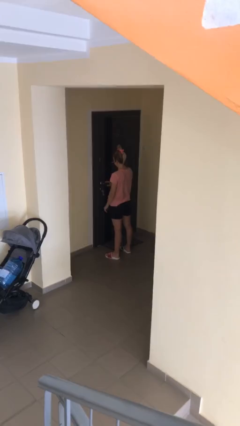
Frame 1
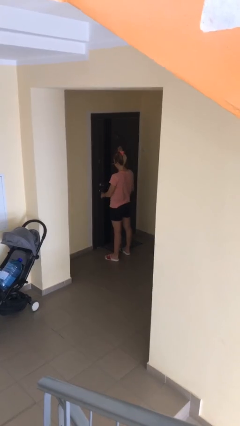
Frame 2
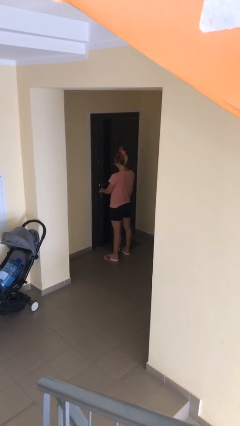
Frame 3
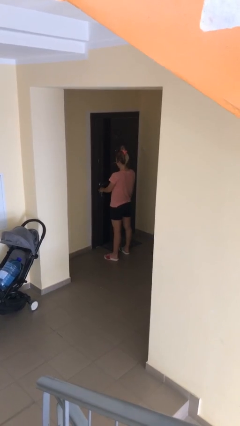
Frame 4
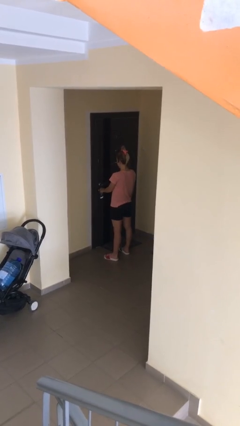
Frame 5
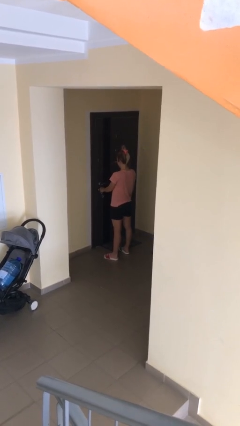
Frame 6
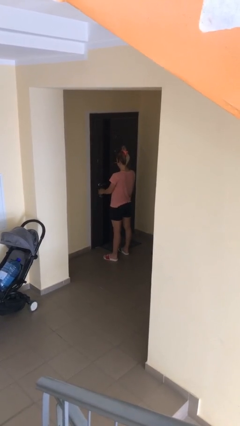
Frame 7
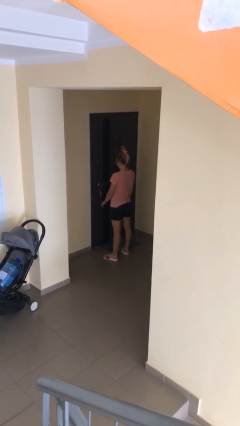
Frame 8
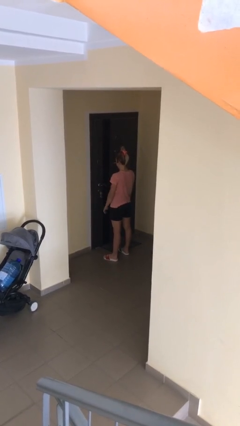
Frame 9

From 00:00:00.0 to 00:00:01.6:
person locks door with keys

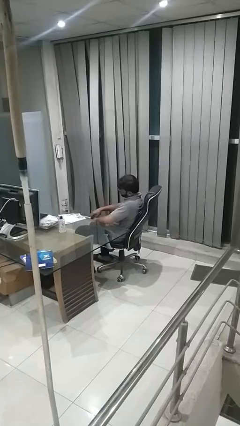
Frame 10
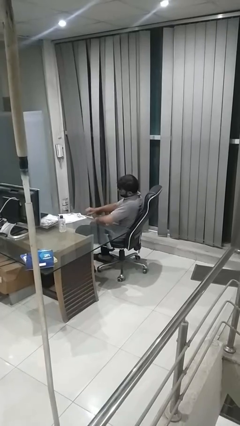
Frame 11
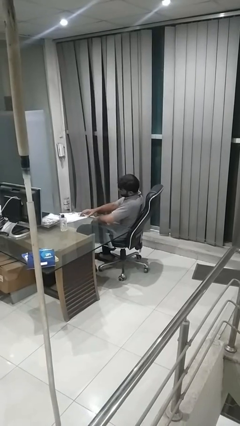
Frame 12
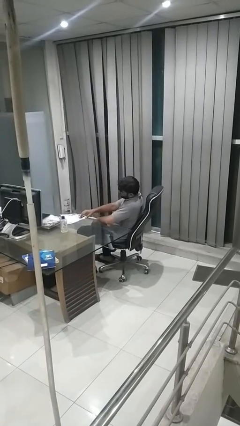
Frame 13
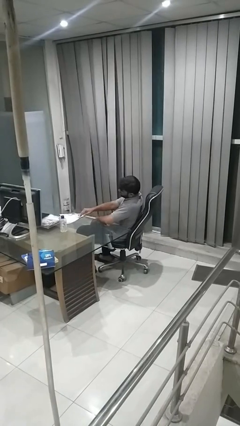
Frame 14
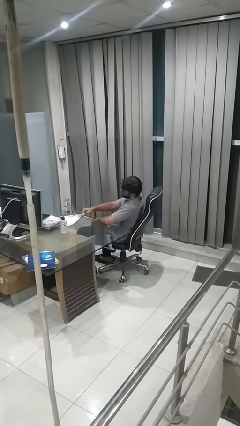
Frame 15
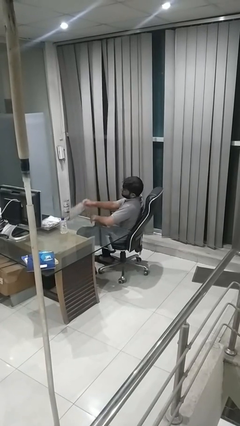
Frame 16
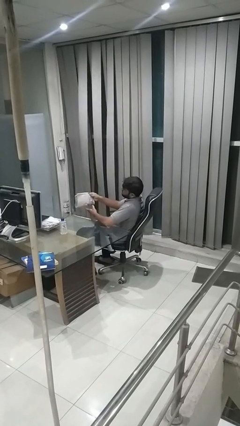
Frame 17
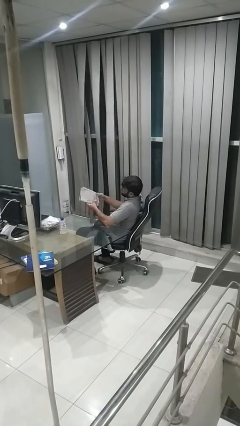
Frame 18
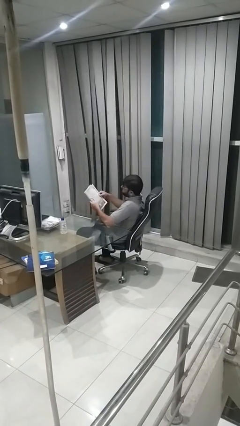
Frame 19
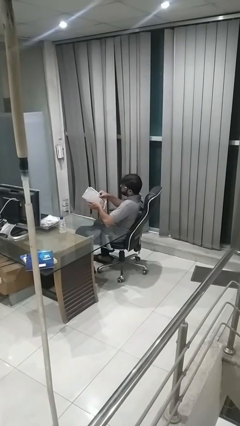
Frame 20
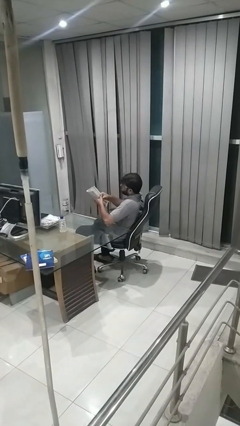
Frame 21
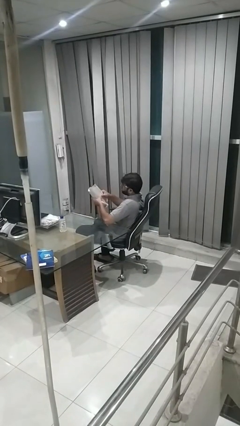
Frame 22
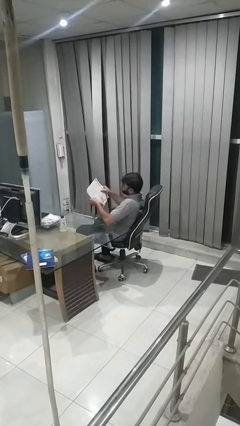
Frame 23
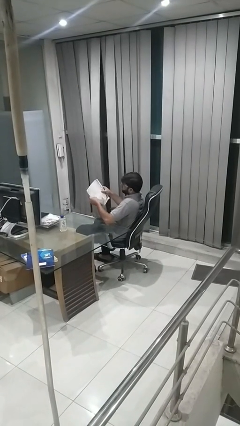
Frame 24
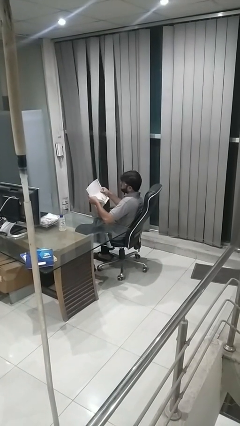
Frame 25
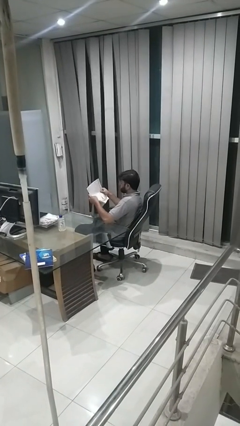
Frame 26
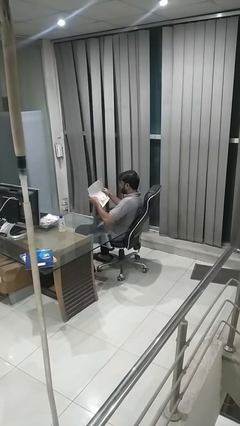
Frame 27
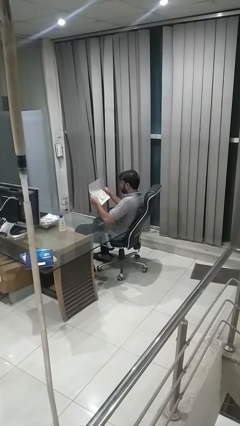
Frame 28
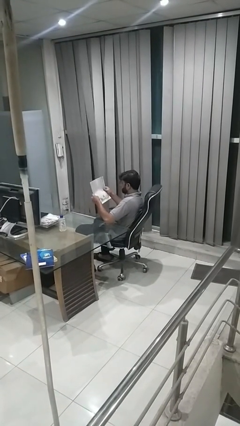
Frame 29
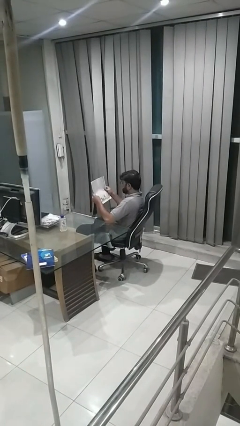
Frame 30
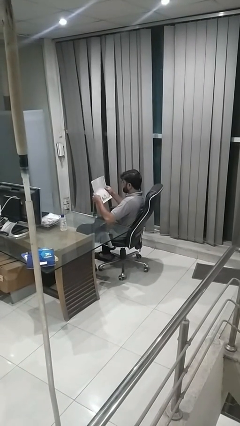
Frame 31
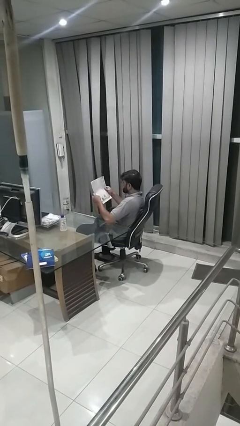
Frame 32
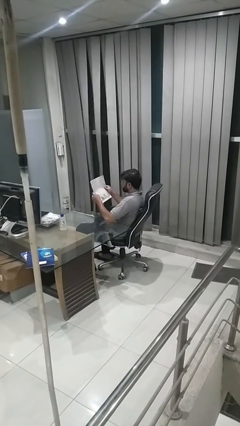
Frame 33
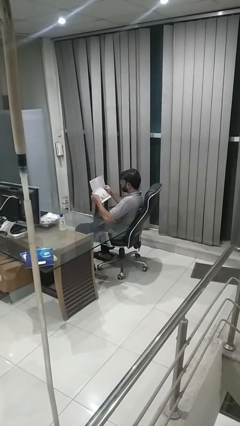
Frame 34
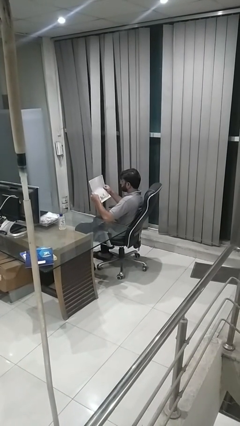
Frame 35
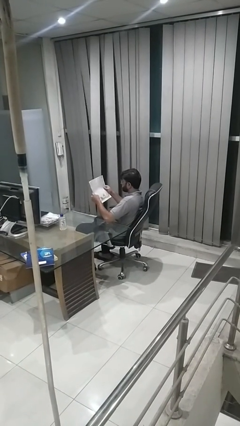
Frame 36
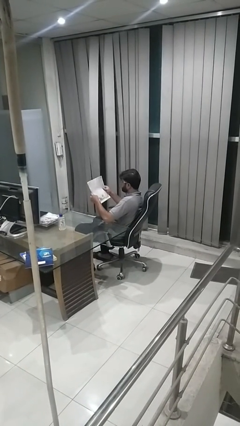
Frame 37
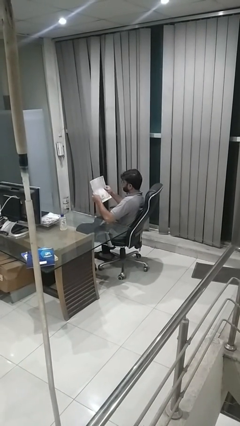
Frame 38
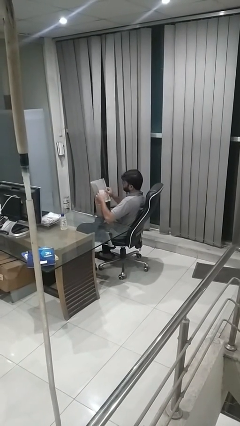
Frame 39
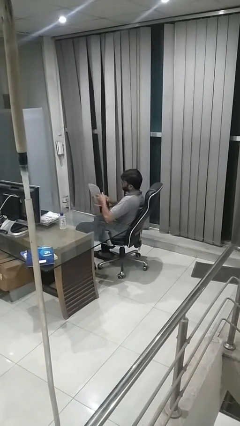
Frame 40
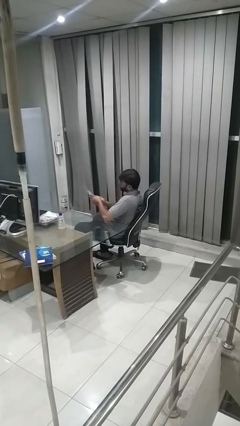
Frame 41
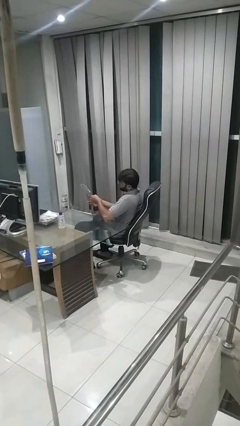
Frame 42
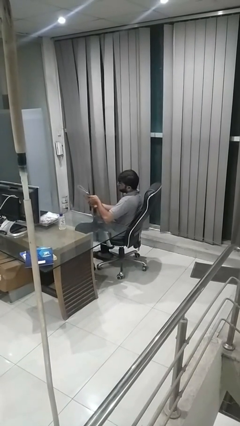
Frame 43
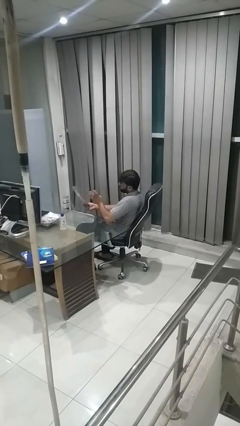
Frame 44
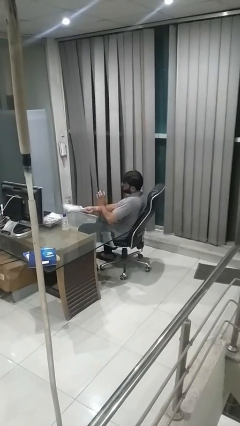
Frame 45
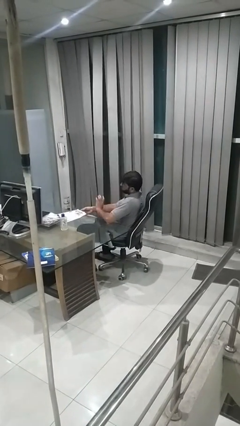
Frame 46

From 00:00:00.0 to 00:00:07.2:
person reads newspaper

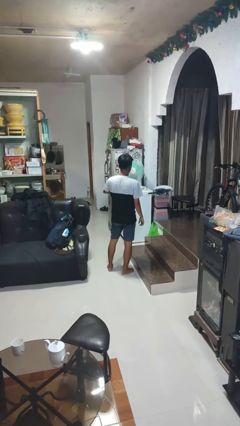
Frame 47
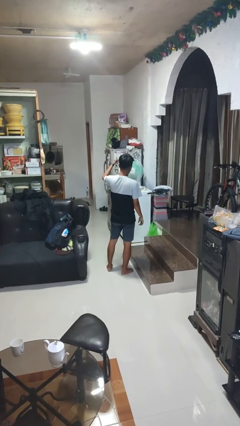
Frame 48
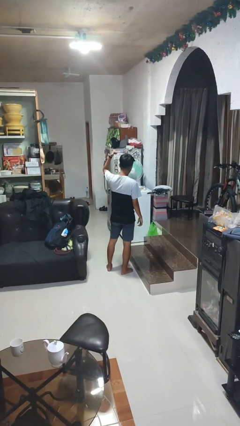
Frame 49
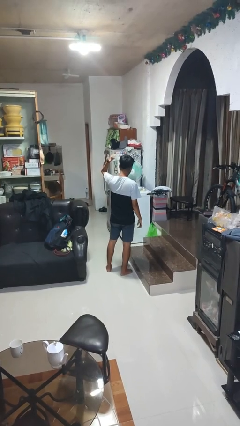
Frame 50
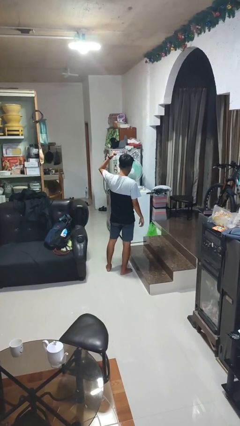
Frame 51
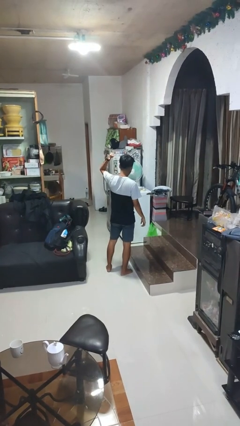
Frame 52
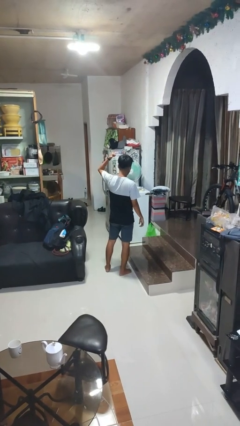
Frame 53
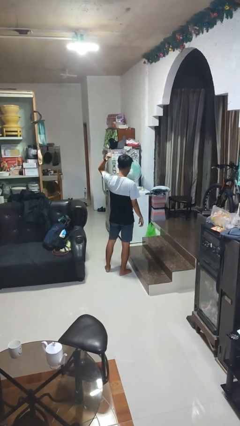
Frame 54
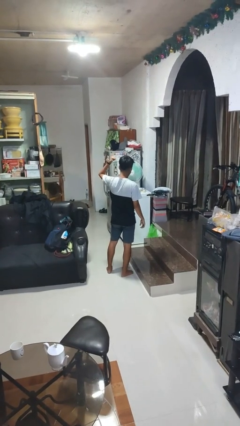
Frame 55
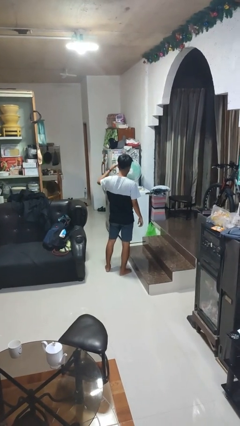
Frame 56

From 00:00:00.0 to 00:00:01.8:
person gestures behind me

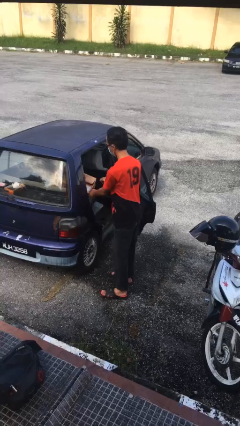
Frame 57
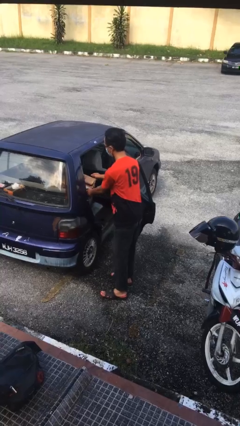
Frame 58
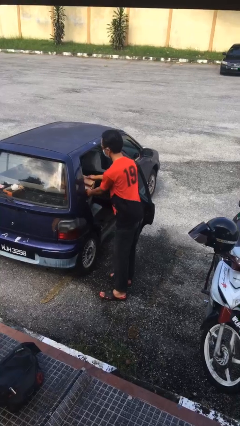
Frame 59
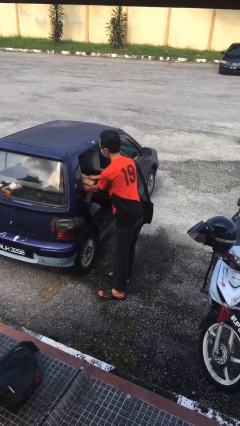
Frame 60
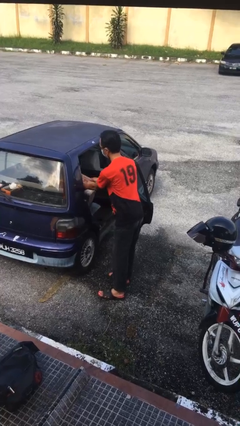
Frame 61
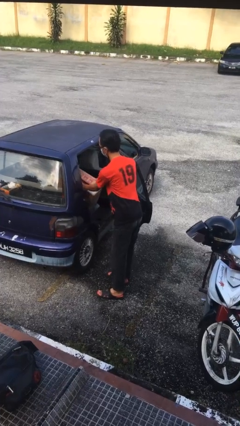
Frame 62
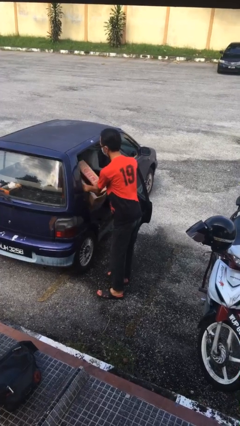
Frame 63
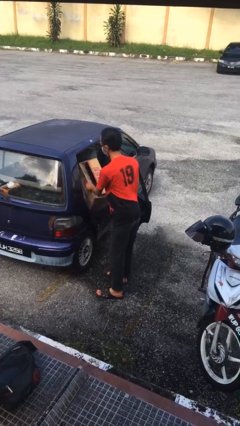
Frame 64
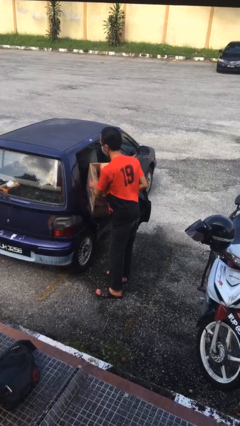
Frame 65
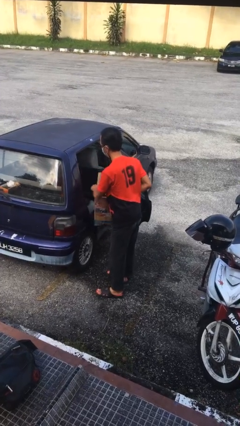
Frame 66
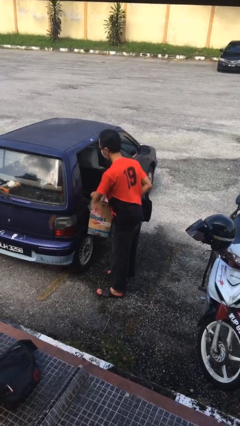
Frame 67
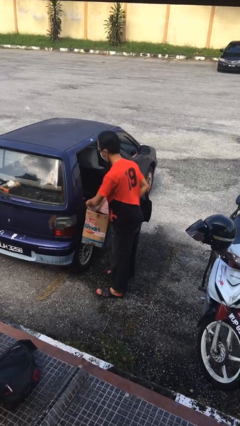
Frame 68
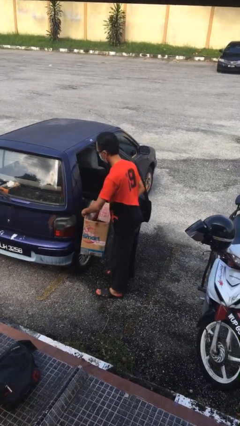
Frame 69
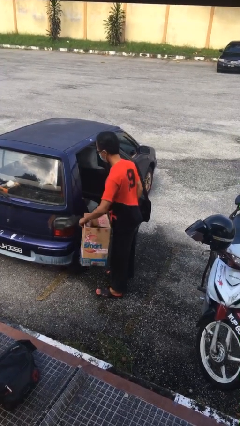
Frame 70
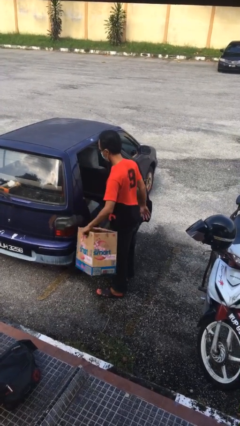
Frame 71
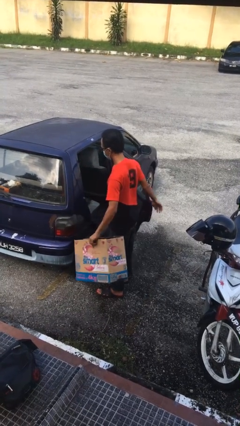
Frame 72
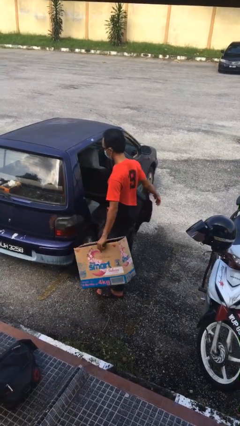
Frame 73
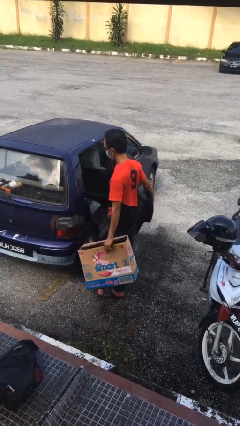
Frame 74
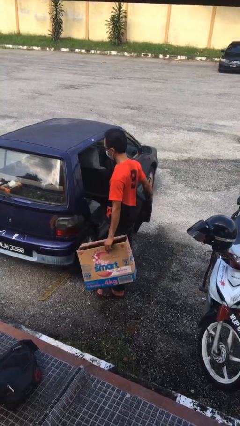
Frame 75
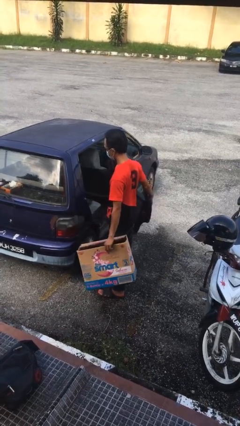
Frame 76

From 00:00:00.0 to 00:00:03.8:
person unloads car

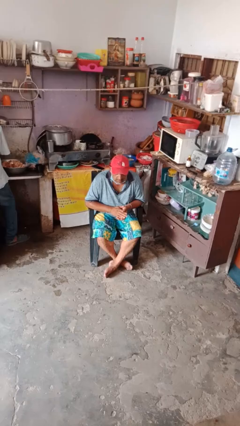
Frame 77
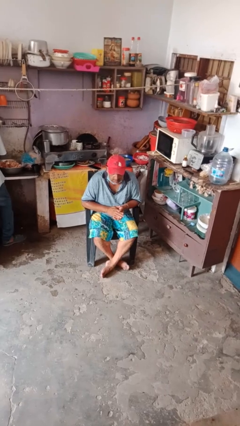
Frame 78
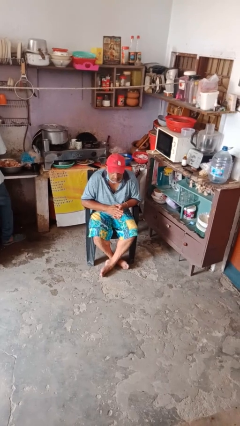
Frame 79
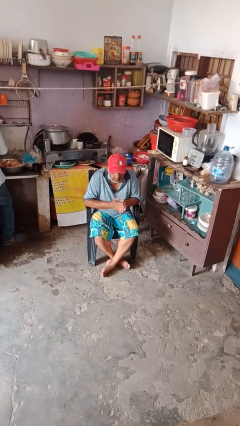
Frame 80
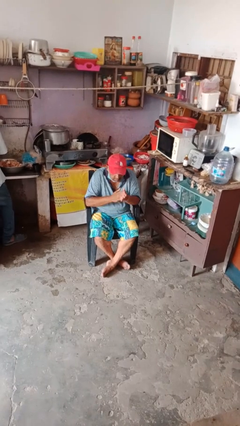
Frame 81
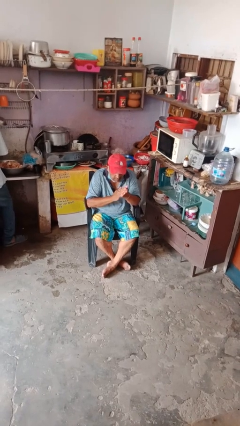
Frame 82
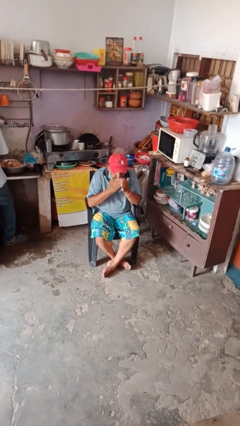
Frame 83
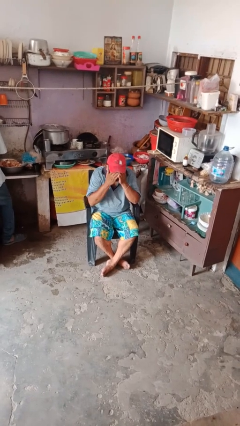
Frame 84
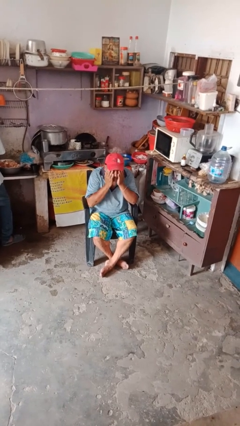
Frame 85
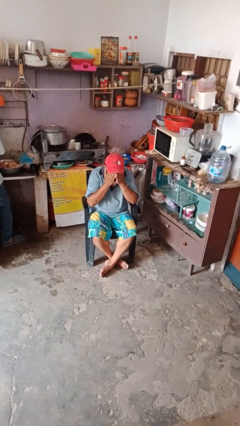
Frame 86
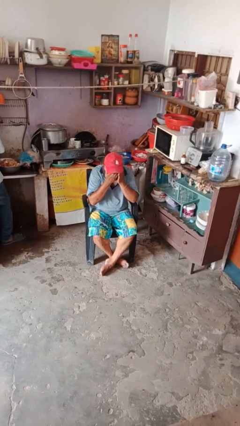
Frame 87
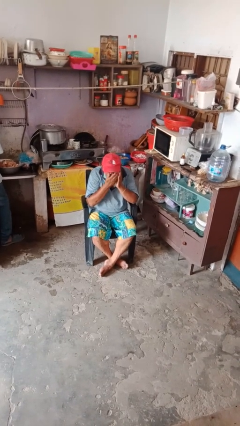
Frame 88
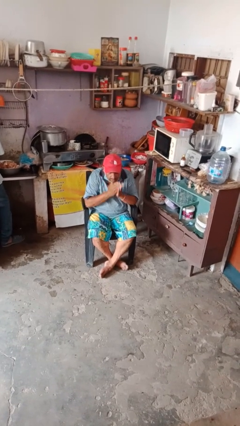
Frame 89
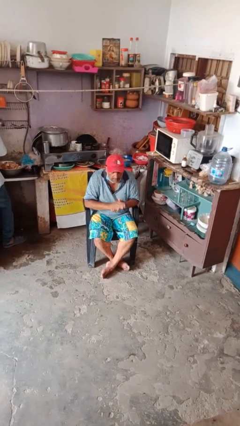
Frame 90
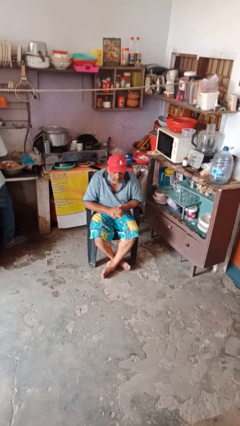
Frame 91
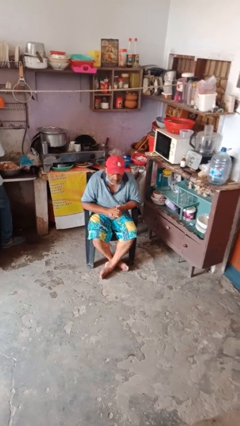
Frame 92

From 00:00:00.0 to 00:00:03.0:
person applies foundation makeup

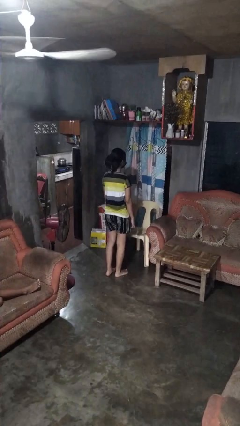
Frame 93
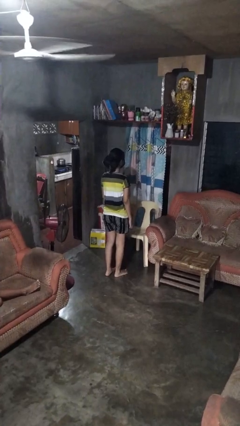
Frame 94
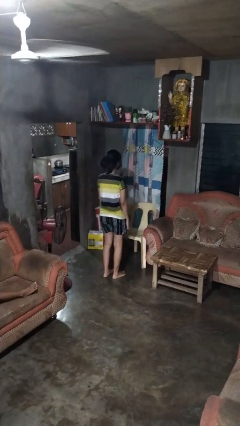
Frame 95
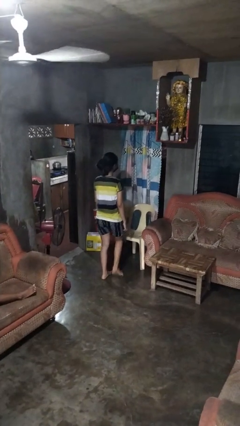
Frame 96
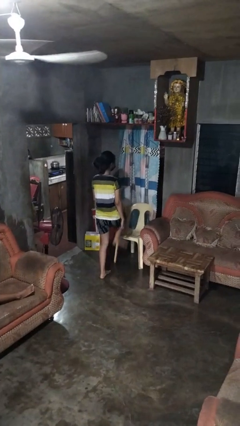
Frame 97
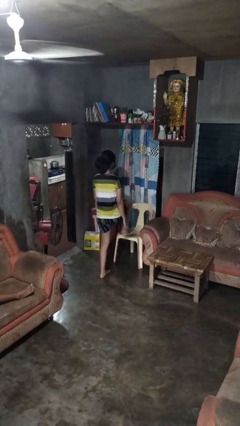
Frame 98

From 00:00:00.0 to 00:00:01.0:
person climbs on chair
